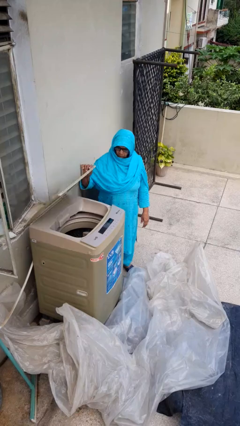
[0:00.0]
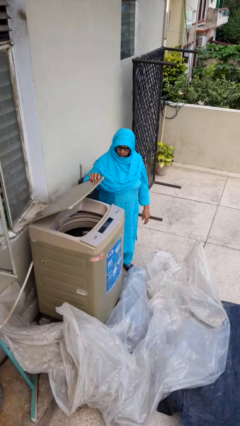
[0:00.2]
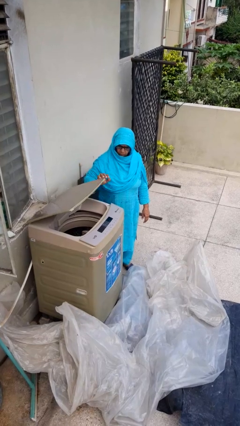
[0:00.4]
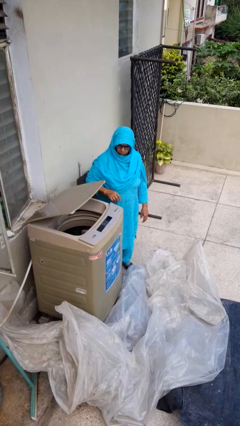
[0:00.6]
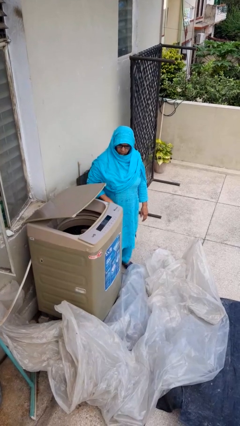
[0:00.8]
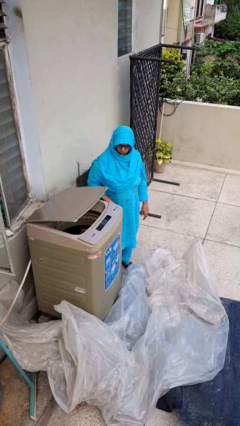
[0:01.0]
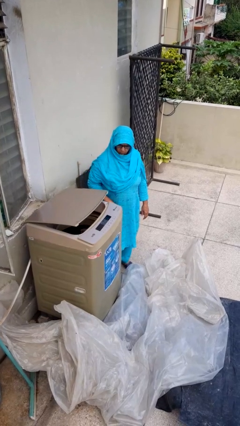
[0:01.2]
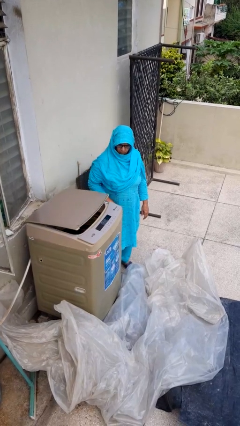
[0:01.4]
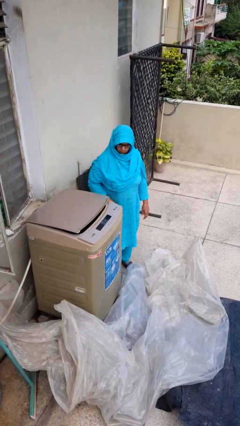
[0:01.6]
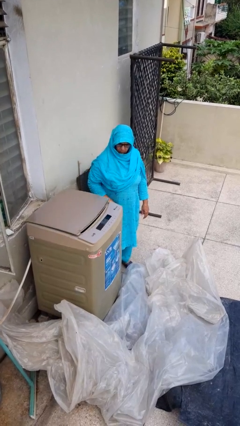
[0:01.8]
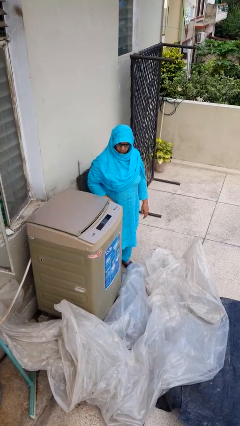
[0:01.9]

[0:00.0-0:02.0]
person closes clothes washer

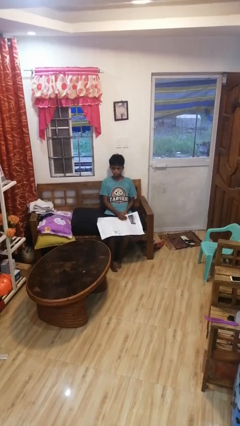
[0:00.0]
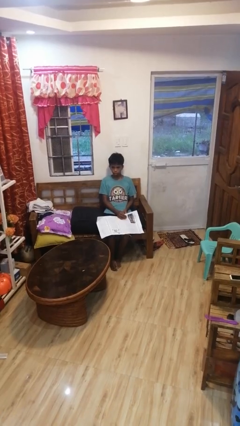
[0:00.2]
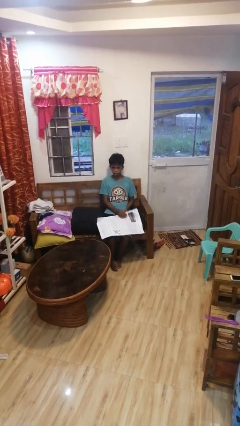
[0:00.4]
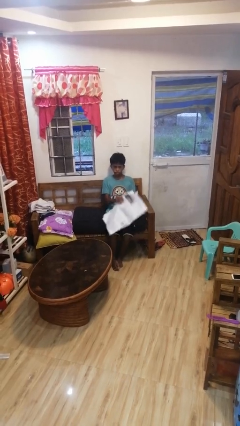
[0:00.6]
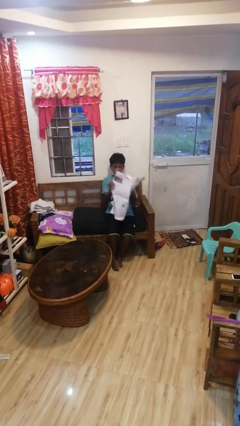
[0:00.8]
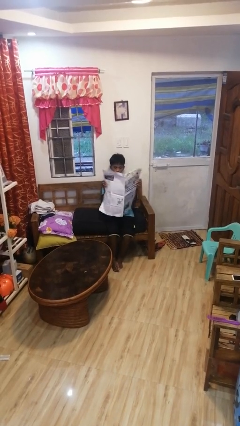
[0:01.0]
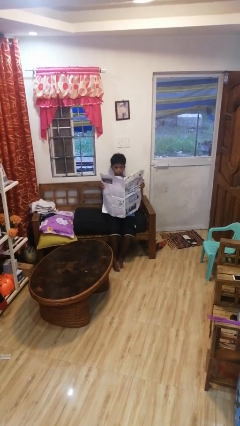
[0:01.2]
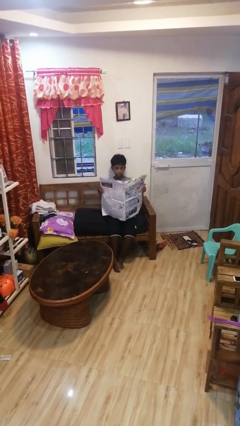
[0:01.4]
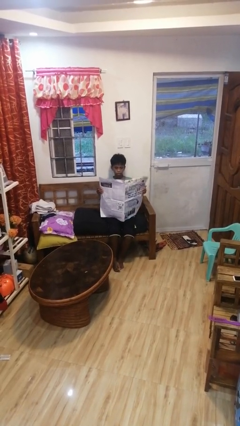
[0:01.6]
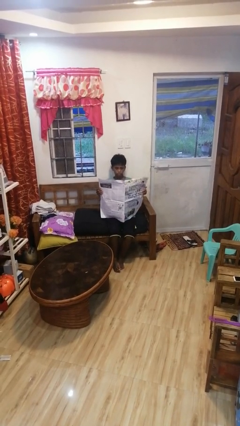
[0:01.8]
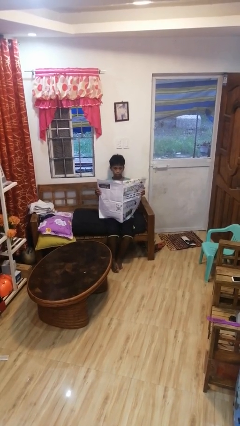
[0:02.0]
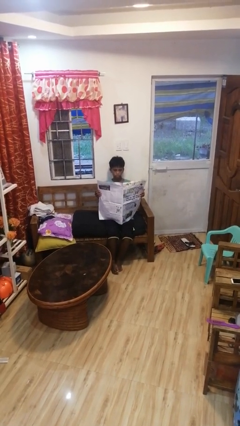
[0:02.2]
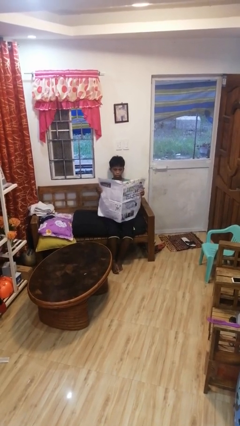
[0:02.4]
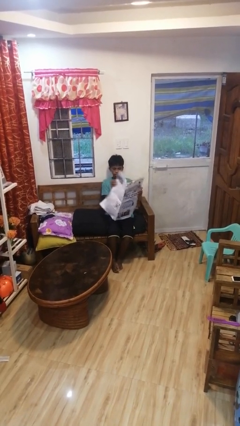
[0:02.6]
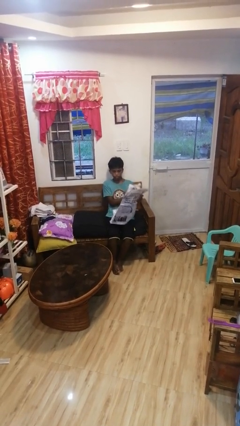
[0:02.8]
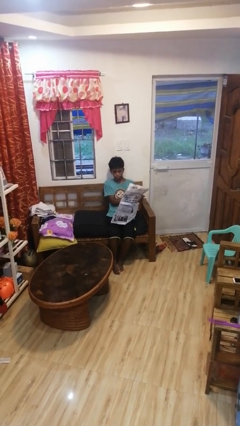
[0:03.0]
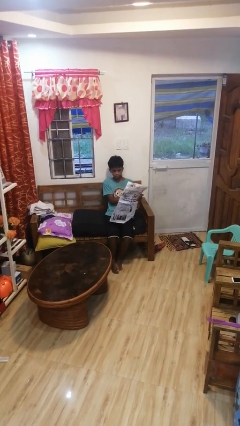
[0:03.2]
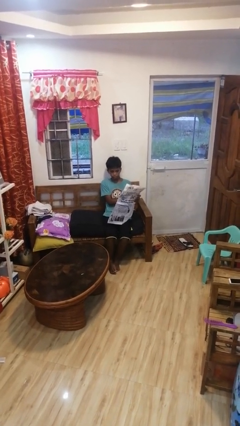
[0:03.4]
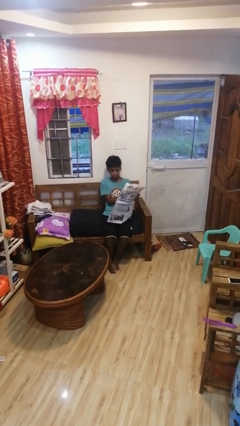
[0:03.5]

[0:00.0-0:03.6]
person reads newspaper

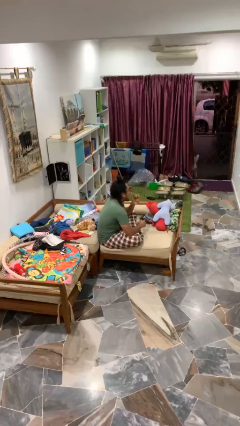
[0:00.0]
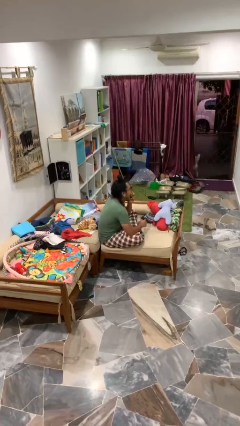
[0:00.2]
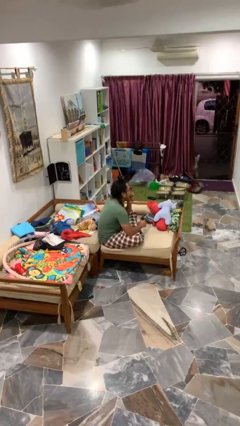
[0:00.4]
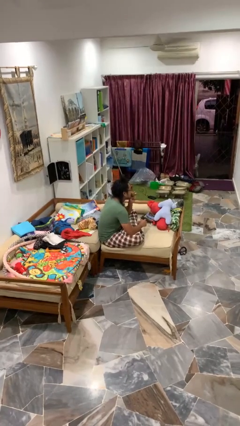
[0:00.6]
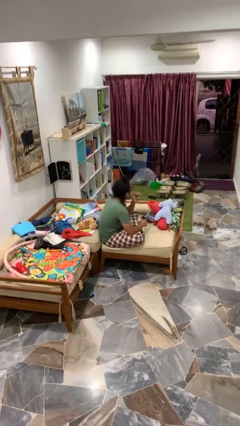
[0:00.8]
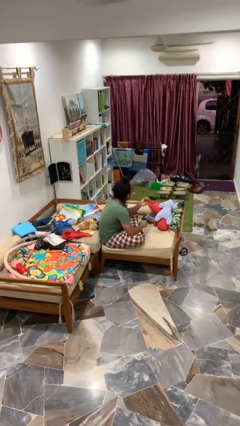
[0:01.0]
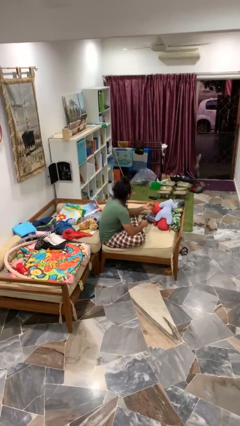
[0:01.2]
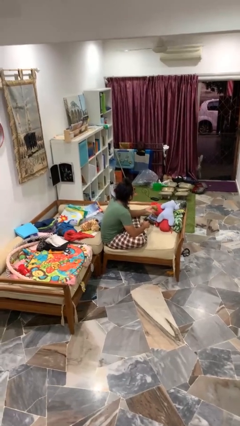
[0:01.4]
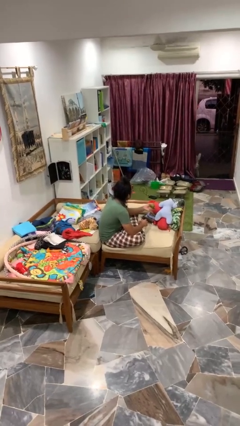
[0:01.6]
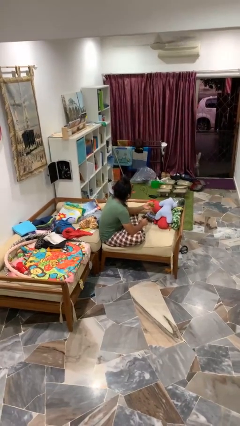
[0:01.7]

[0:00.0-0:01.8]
person eats apple

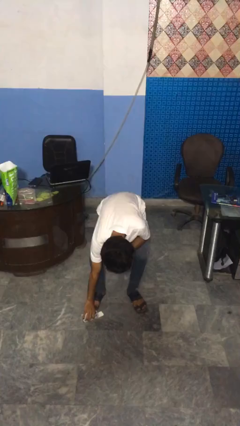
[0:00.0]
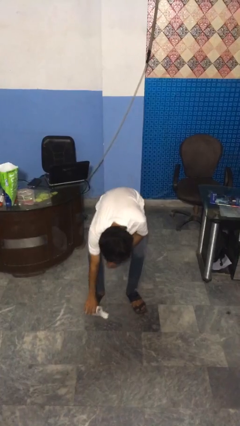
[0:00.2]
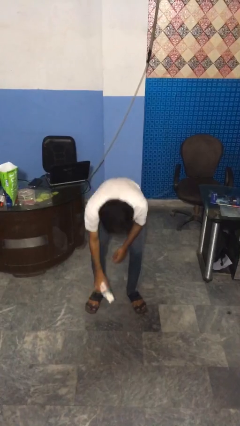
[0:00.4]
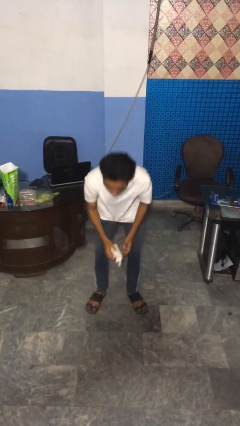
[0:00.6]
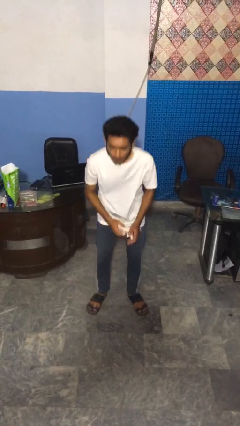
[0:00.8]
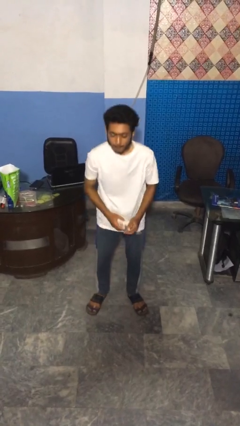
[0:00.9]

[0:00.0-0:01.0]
person picks up object from floor

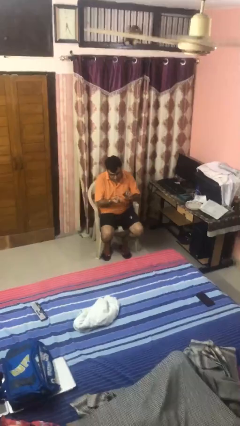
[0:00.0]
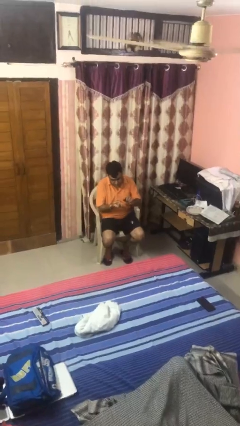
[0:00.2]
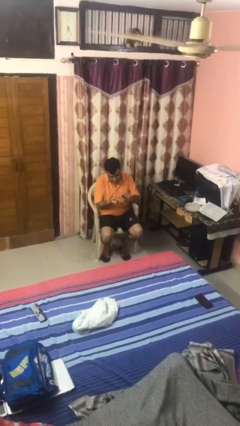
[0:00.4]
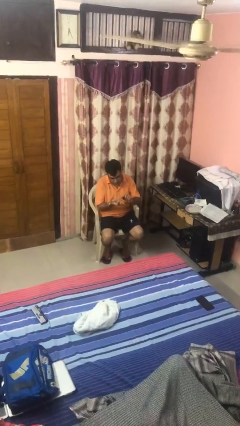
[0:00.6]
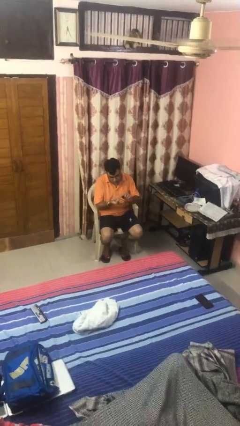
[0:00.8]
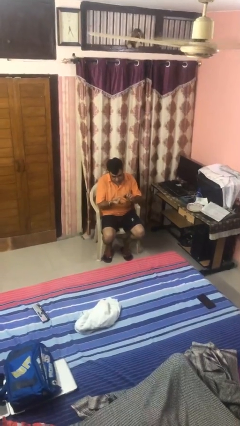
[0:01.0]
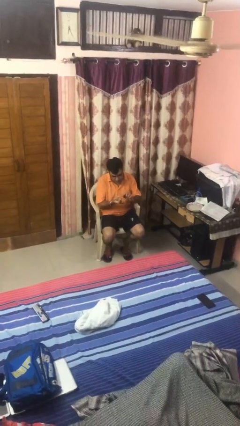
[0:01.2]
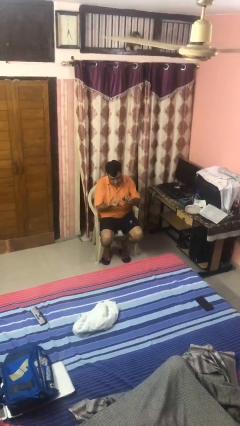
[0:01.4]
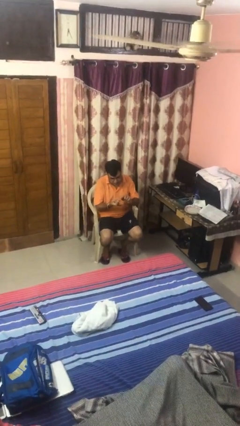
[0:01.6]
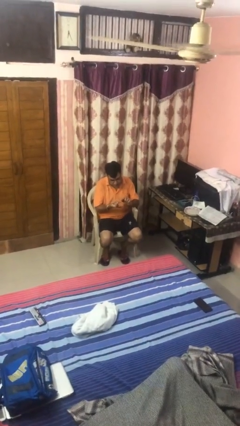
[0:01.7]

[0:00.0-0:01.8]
person files fingernails

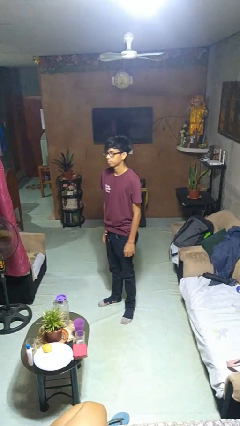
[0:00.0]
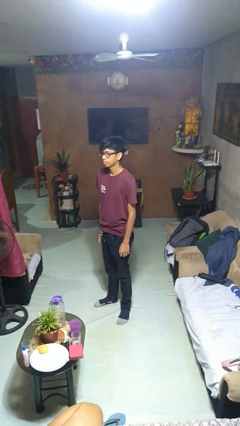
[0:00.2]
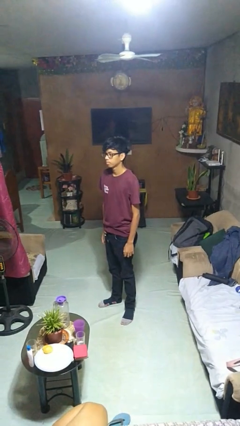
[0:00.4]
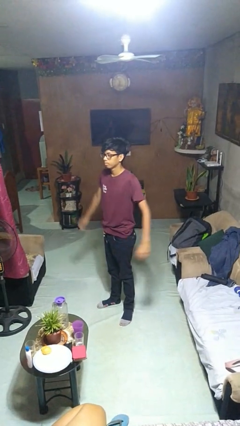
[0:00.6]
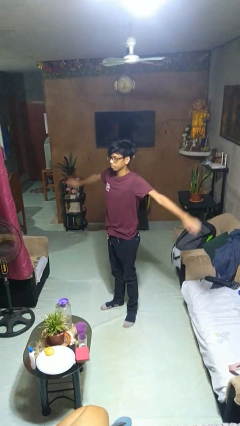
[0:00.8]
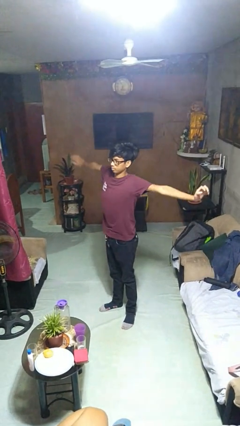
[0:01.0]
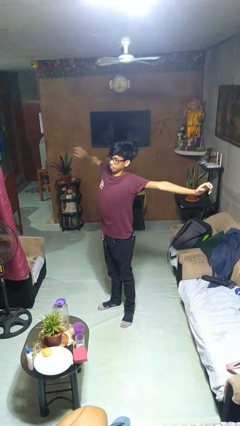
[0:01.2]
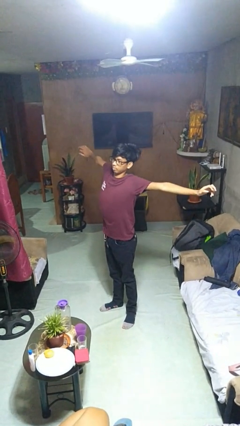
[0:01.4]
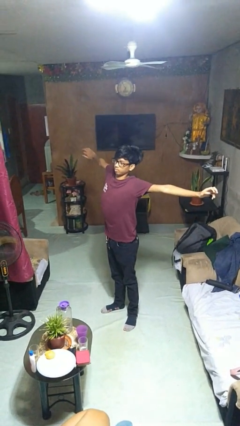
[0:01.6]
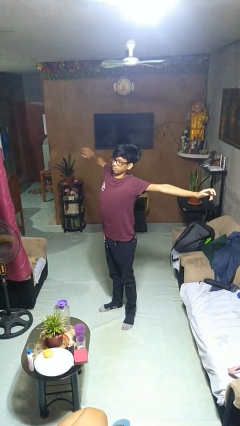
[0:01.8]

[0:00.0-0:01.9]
person stretches arms to side

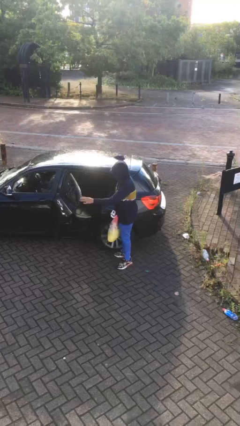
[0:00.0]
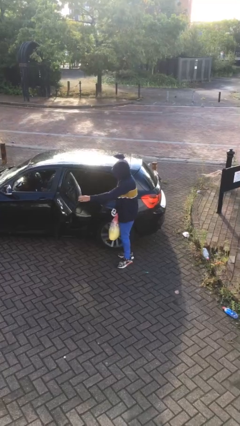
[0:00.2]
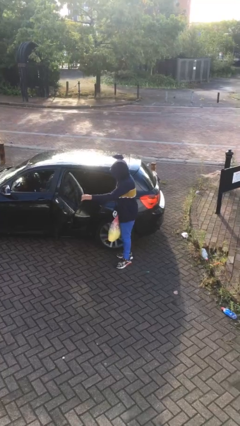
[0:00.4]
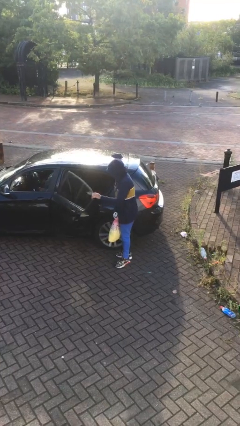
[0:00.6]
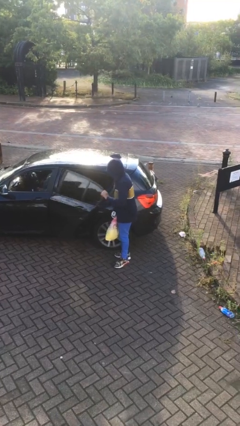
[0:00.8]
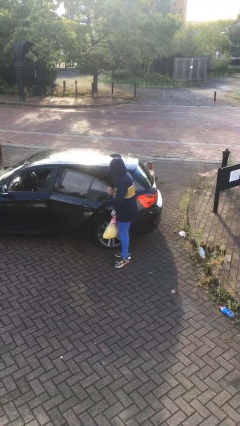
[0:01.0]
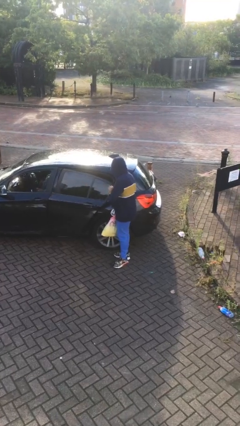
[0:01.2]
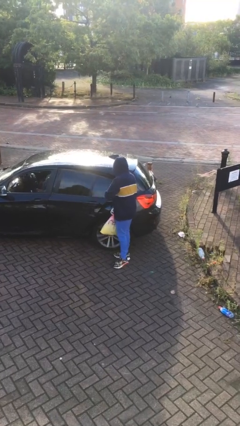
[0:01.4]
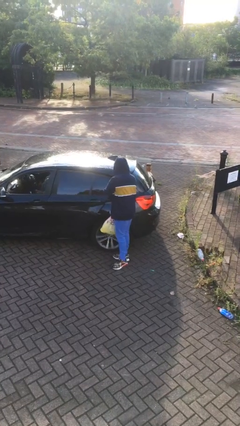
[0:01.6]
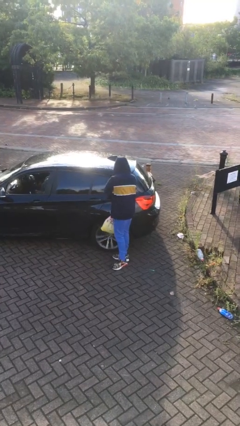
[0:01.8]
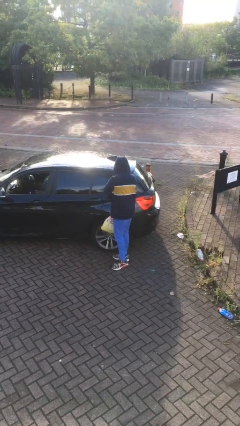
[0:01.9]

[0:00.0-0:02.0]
person closes car door

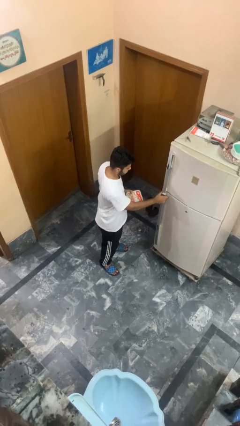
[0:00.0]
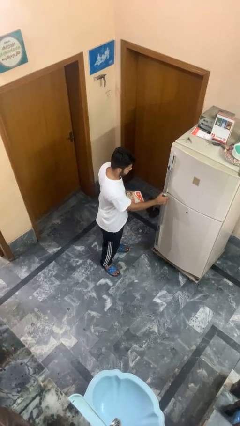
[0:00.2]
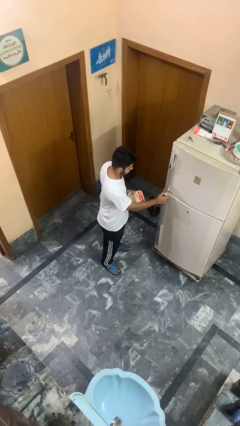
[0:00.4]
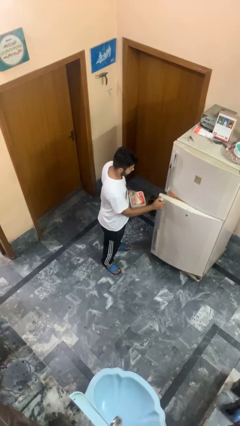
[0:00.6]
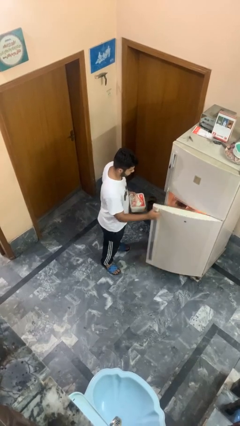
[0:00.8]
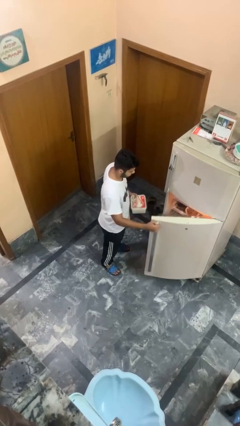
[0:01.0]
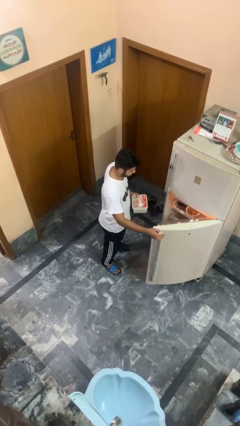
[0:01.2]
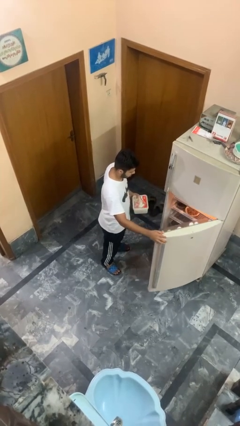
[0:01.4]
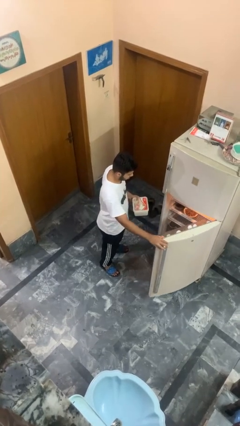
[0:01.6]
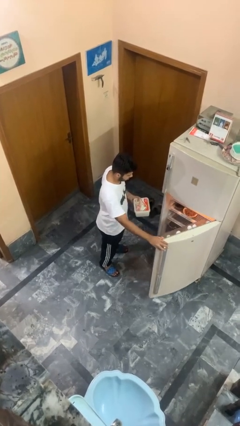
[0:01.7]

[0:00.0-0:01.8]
person opens refrigerator

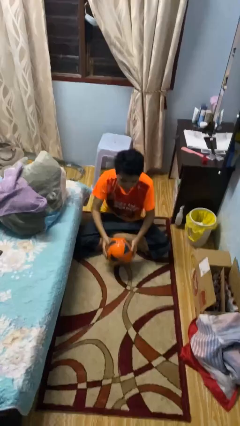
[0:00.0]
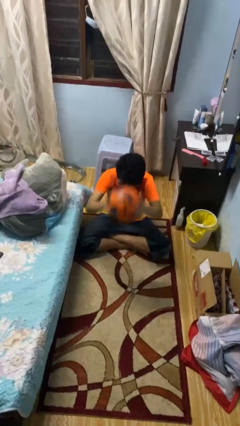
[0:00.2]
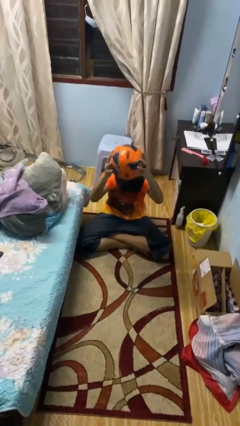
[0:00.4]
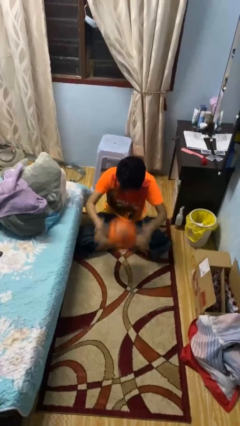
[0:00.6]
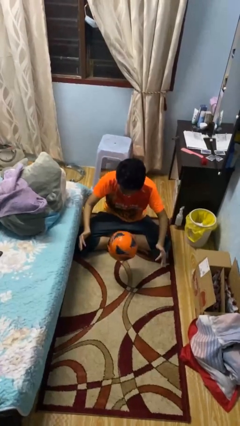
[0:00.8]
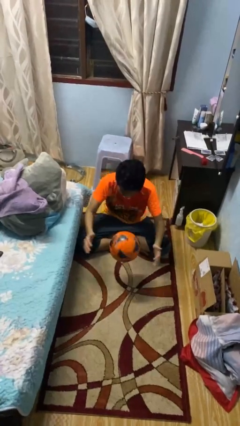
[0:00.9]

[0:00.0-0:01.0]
person bounces ball on floor
